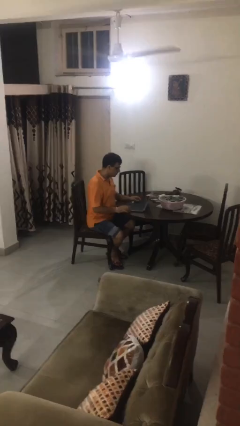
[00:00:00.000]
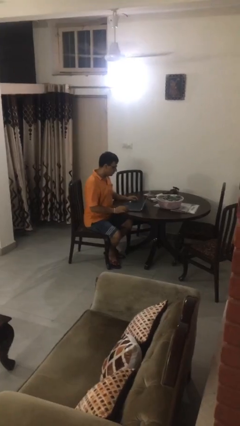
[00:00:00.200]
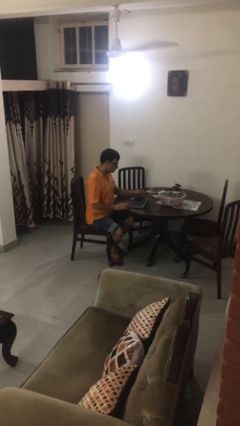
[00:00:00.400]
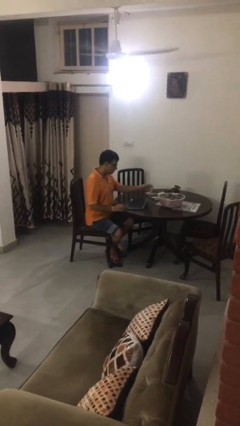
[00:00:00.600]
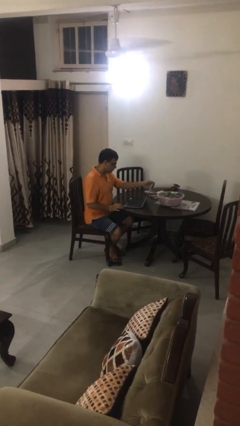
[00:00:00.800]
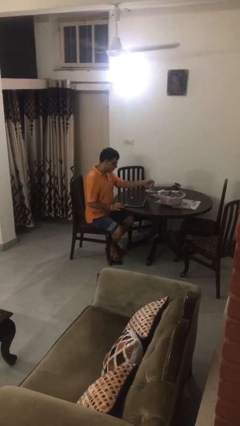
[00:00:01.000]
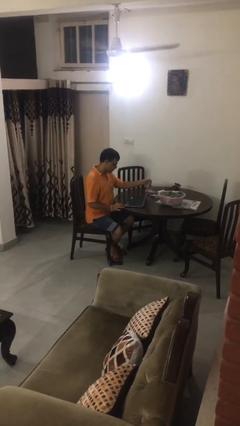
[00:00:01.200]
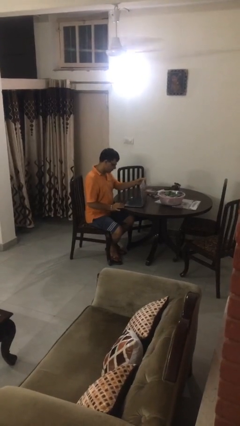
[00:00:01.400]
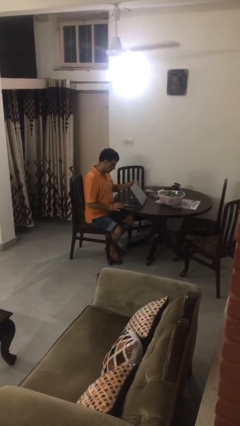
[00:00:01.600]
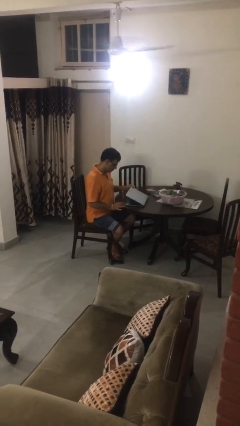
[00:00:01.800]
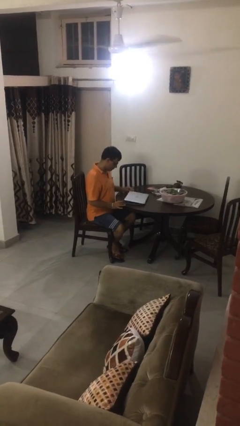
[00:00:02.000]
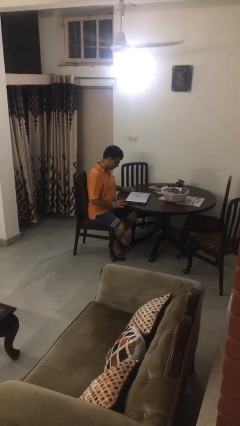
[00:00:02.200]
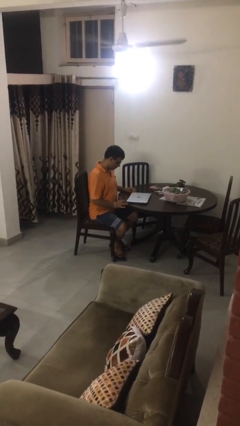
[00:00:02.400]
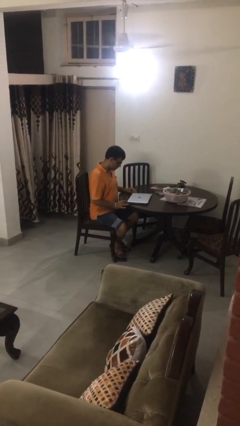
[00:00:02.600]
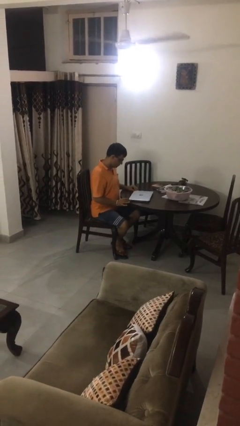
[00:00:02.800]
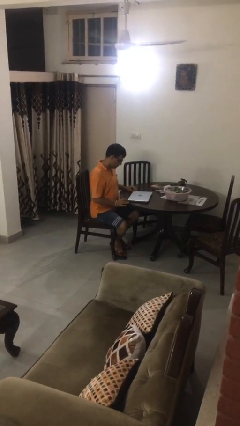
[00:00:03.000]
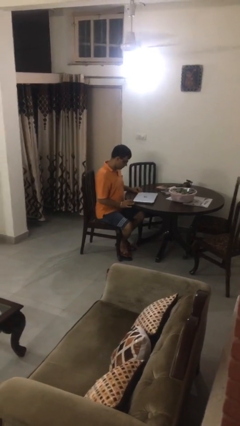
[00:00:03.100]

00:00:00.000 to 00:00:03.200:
person closes laptop

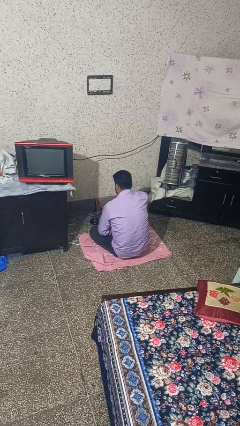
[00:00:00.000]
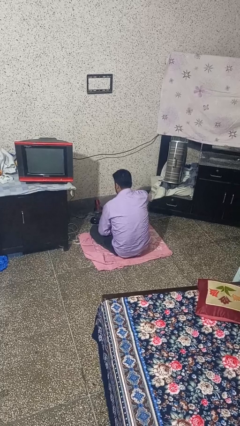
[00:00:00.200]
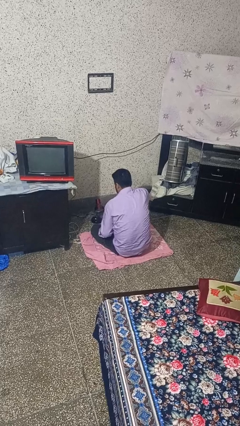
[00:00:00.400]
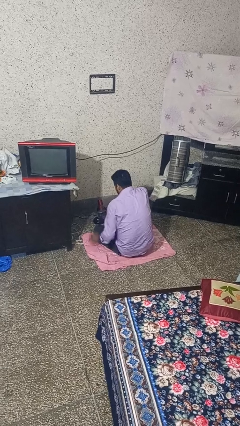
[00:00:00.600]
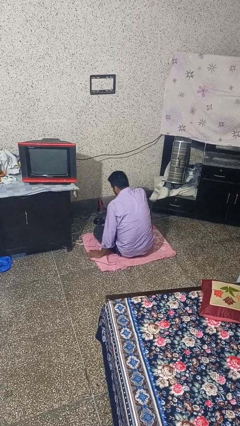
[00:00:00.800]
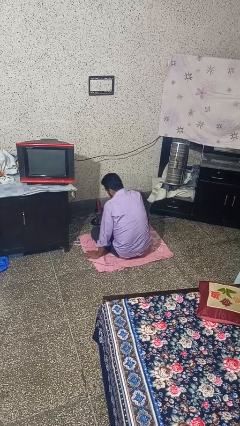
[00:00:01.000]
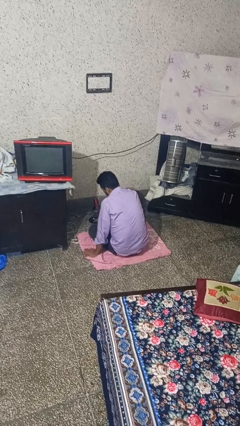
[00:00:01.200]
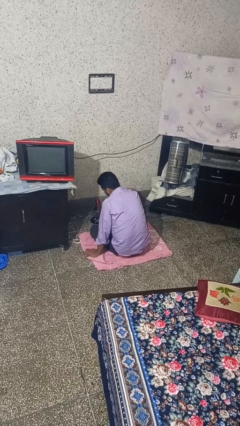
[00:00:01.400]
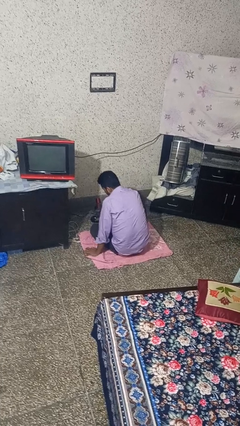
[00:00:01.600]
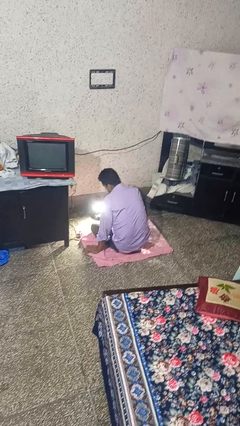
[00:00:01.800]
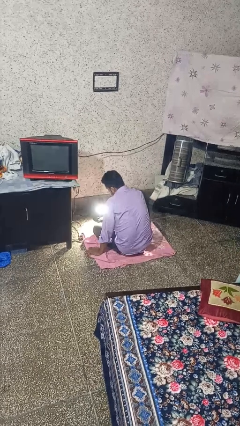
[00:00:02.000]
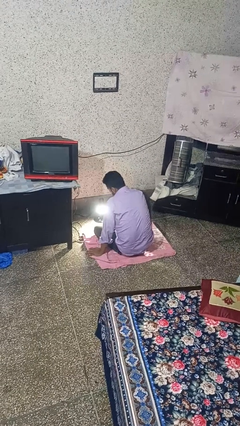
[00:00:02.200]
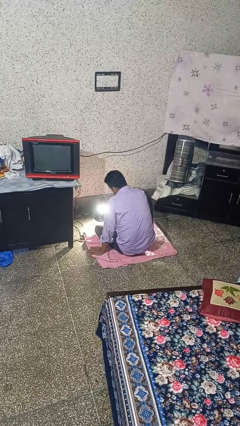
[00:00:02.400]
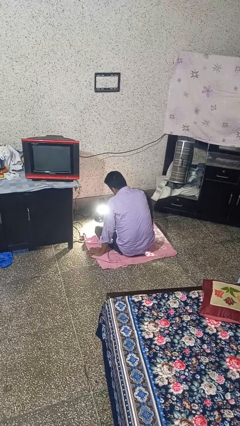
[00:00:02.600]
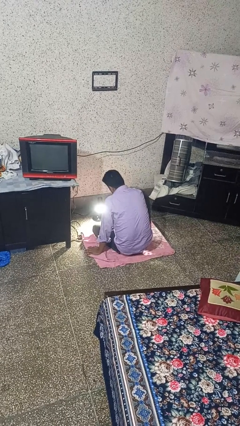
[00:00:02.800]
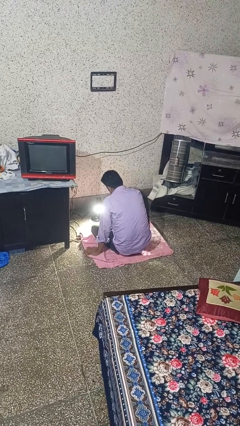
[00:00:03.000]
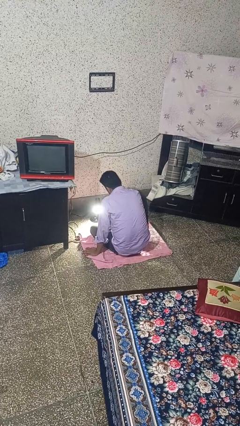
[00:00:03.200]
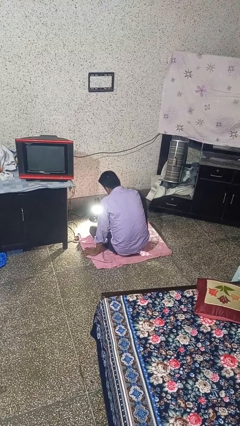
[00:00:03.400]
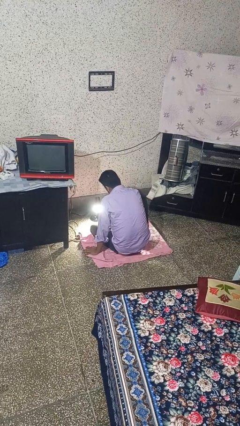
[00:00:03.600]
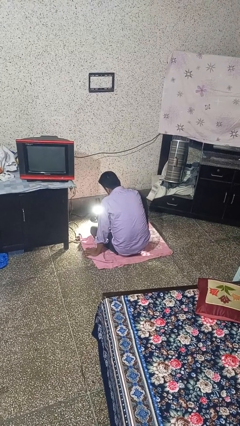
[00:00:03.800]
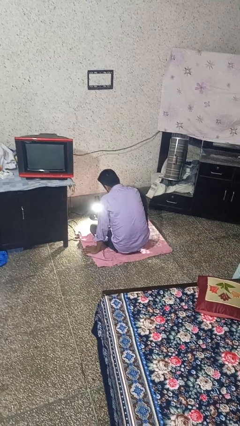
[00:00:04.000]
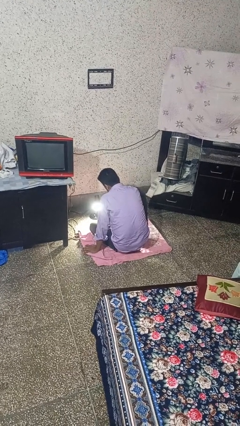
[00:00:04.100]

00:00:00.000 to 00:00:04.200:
person turns on fan

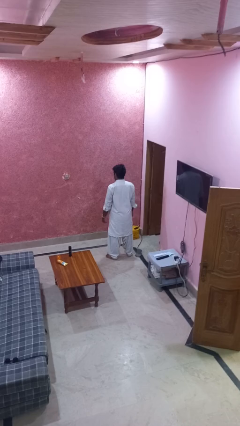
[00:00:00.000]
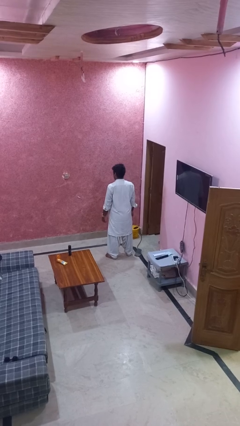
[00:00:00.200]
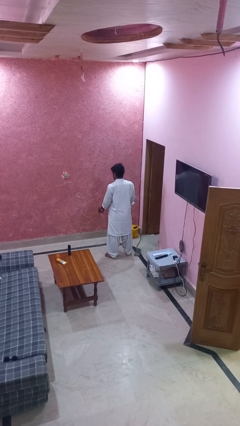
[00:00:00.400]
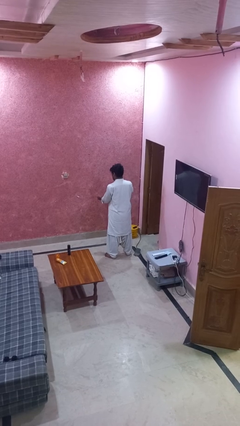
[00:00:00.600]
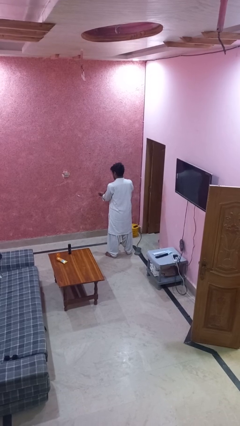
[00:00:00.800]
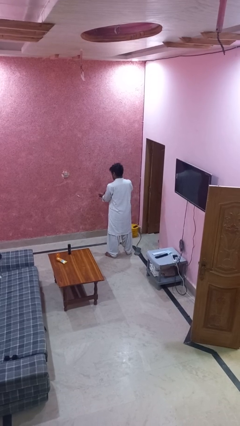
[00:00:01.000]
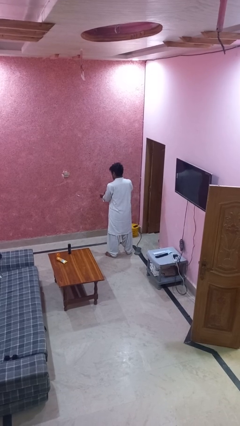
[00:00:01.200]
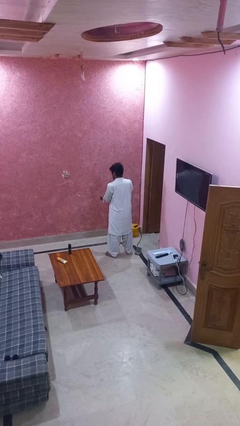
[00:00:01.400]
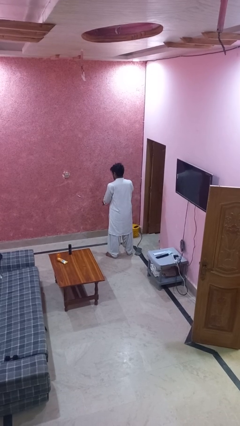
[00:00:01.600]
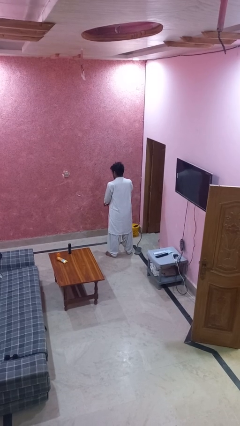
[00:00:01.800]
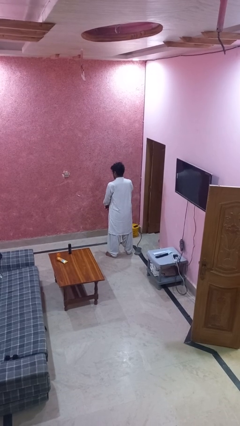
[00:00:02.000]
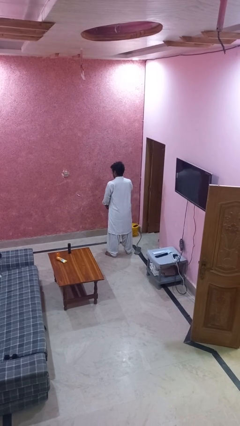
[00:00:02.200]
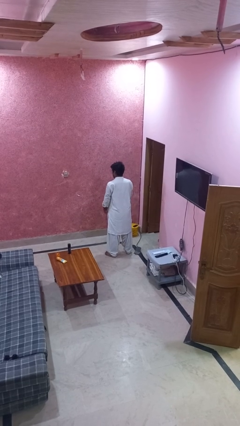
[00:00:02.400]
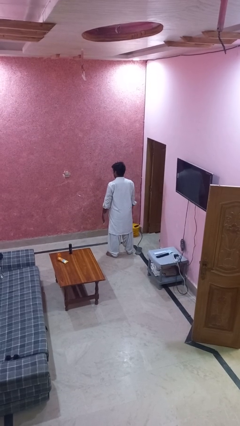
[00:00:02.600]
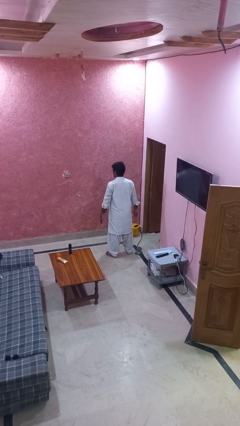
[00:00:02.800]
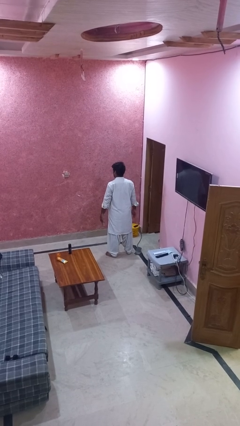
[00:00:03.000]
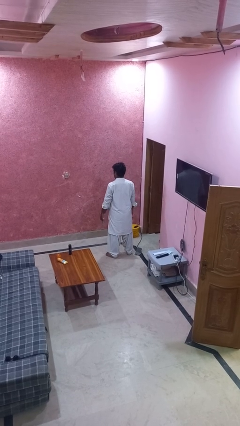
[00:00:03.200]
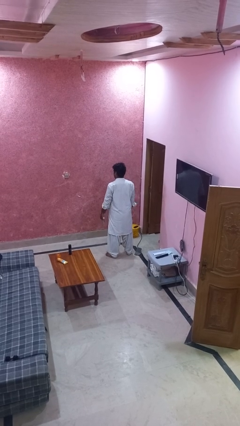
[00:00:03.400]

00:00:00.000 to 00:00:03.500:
person takes off wristwatch

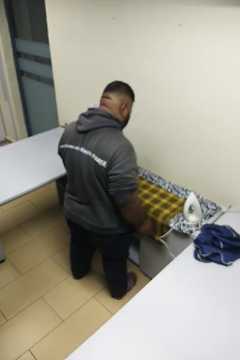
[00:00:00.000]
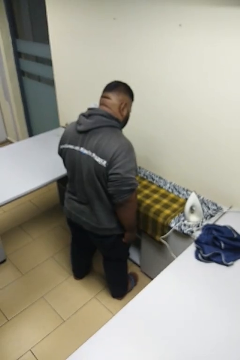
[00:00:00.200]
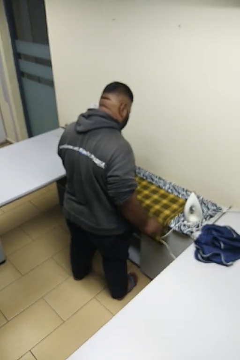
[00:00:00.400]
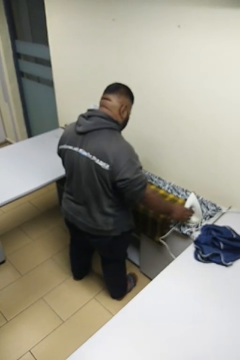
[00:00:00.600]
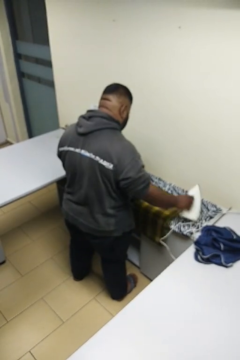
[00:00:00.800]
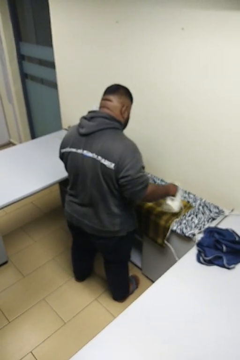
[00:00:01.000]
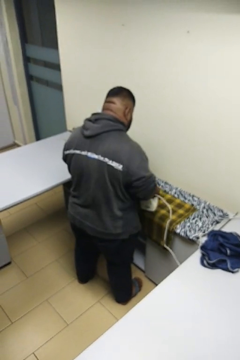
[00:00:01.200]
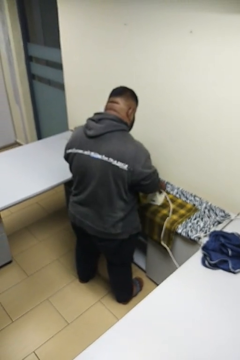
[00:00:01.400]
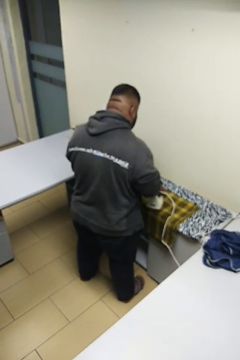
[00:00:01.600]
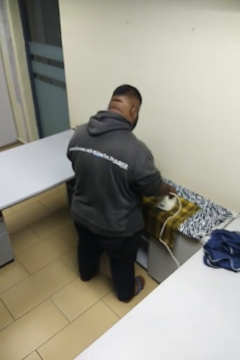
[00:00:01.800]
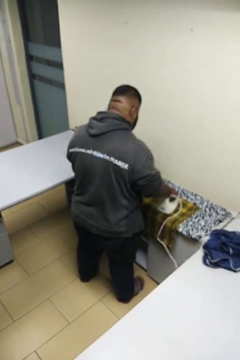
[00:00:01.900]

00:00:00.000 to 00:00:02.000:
person irons clothes

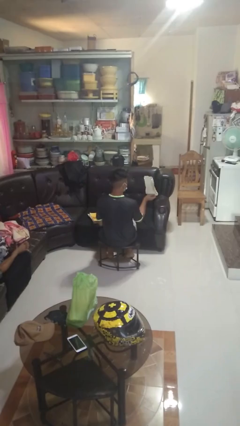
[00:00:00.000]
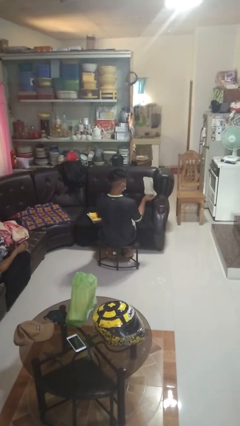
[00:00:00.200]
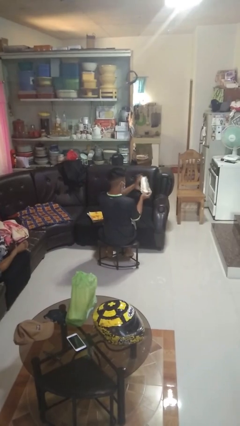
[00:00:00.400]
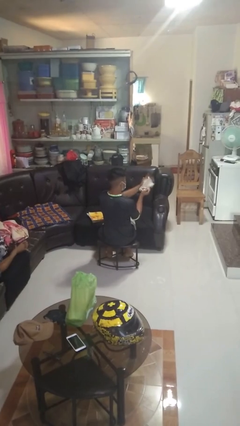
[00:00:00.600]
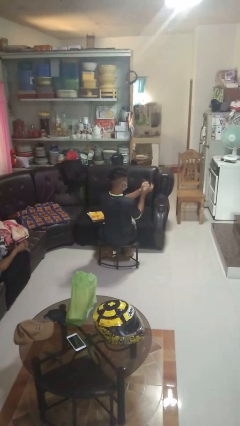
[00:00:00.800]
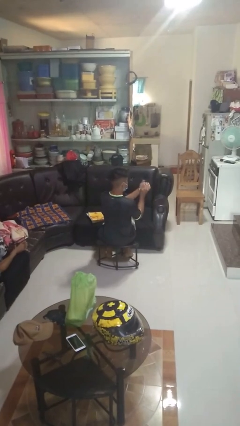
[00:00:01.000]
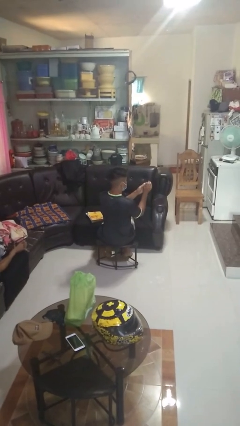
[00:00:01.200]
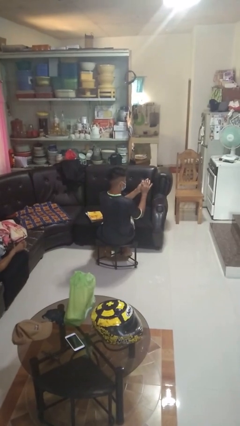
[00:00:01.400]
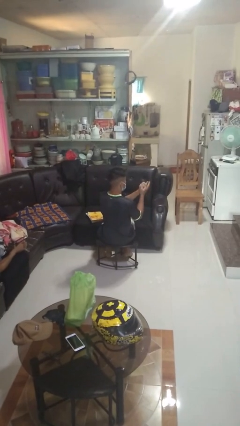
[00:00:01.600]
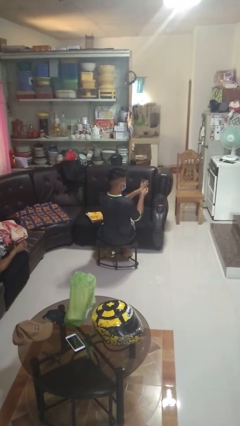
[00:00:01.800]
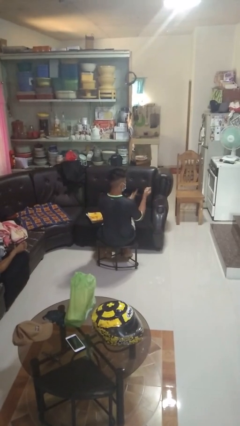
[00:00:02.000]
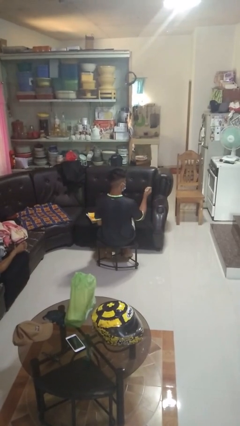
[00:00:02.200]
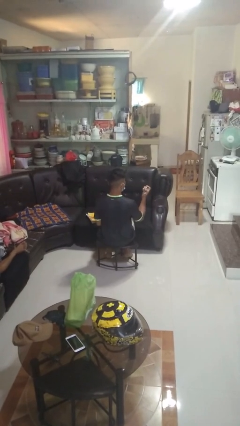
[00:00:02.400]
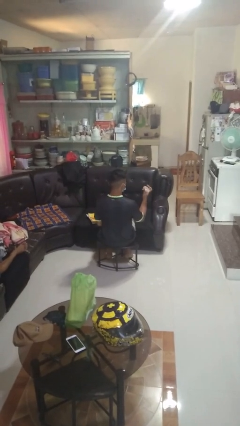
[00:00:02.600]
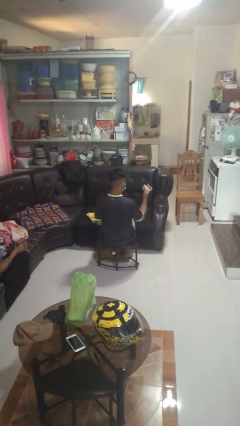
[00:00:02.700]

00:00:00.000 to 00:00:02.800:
person crumples paper

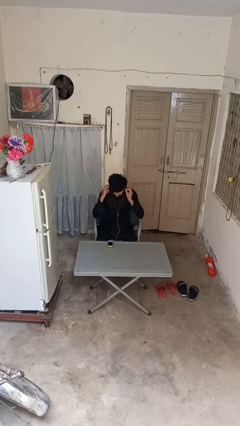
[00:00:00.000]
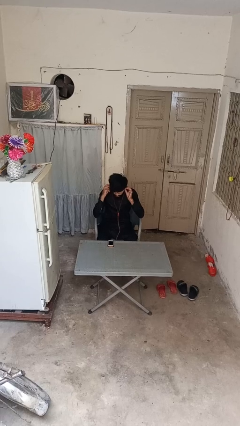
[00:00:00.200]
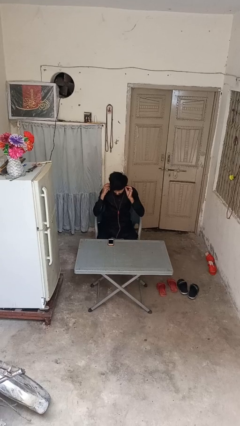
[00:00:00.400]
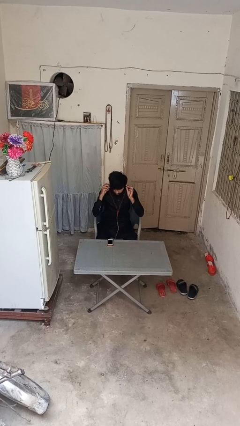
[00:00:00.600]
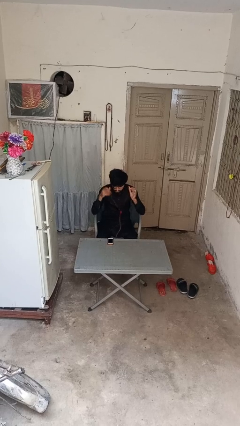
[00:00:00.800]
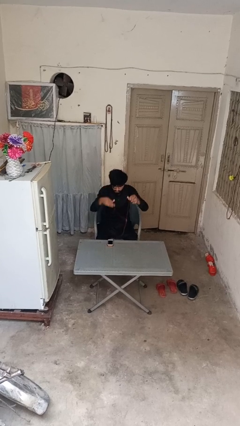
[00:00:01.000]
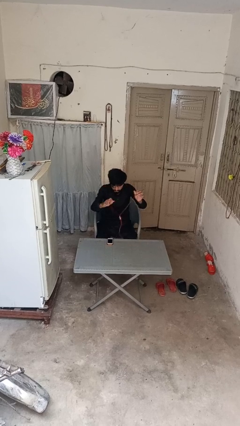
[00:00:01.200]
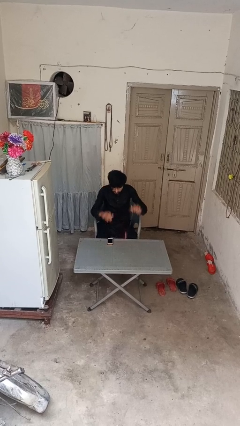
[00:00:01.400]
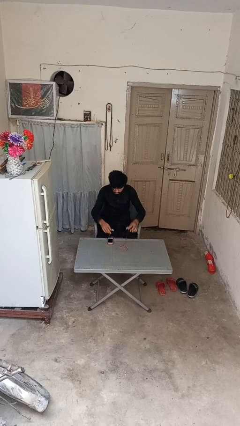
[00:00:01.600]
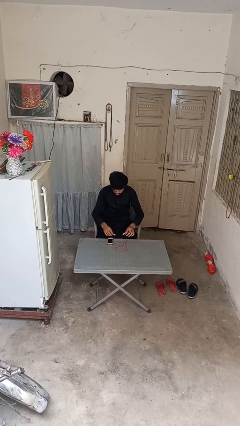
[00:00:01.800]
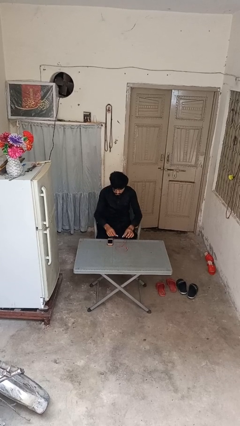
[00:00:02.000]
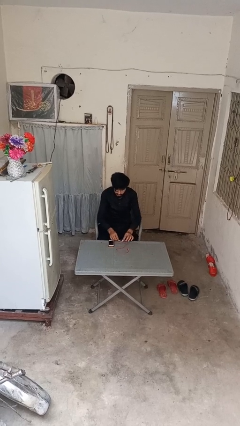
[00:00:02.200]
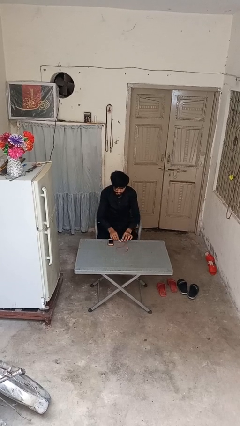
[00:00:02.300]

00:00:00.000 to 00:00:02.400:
person takes off headphones
